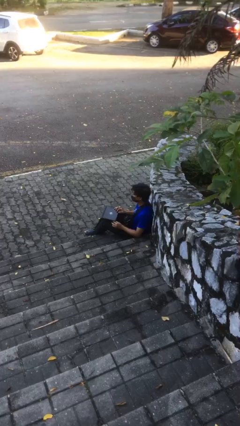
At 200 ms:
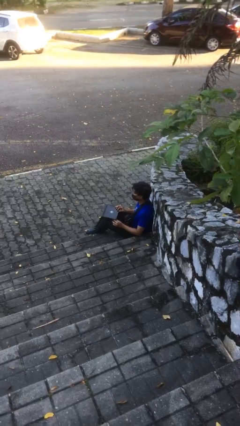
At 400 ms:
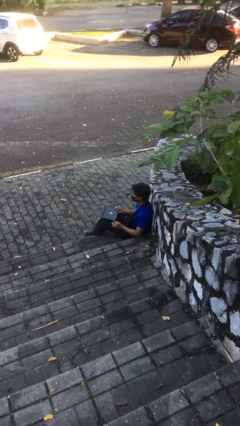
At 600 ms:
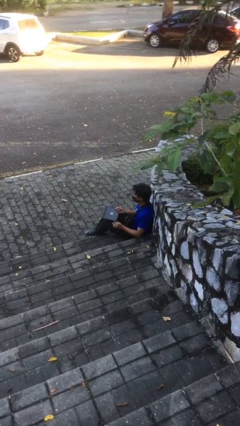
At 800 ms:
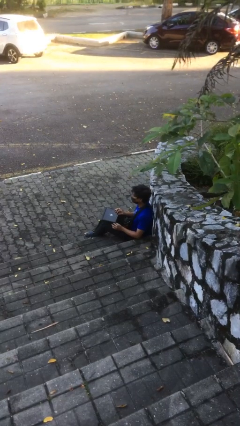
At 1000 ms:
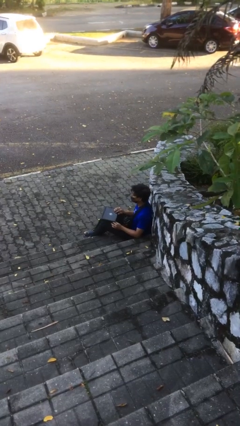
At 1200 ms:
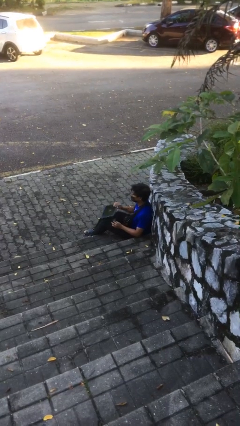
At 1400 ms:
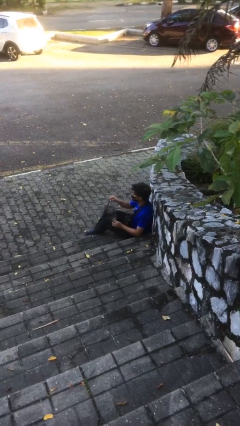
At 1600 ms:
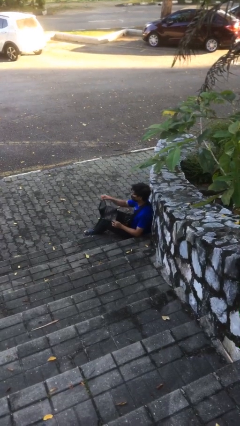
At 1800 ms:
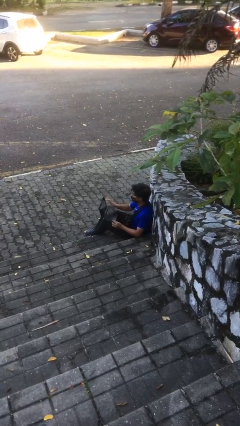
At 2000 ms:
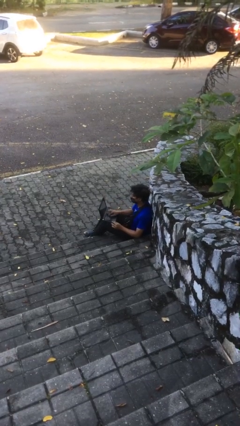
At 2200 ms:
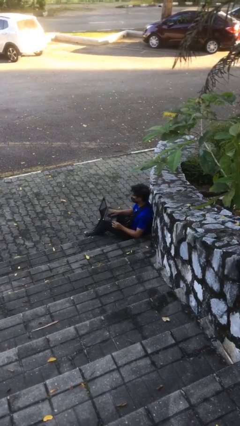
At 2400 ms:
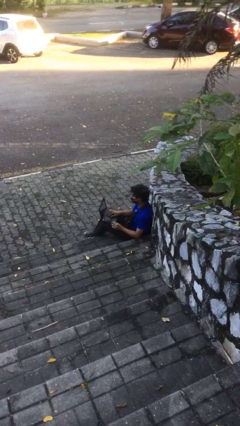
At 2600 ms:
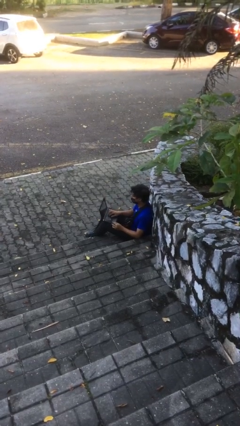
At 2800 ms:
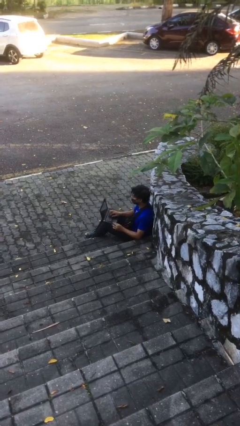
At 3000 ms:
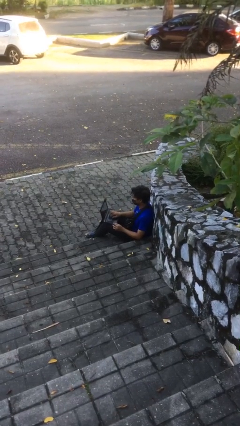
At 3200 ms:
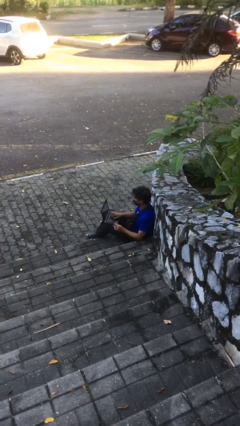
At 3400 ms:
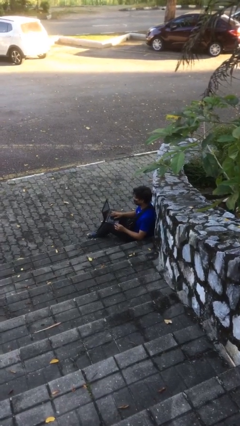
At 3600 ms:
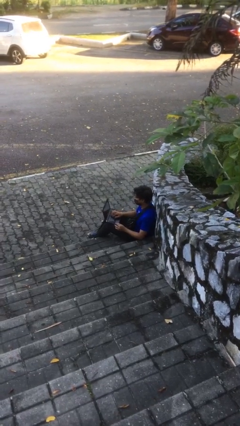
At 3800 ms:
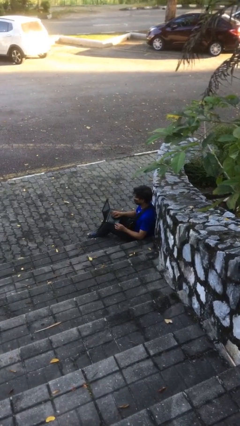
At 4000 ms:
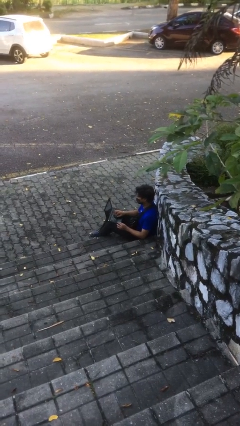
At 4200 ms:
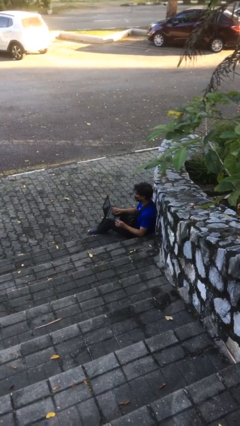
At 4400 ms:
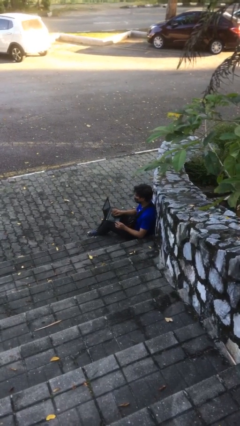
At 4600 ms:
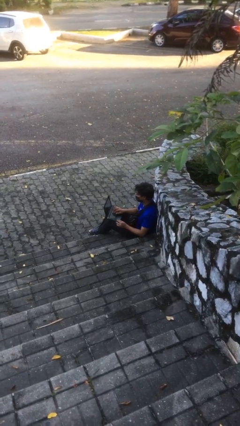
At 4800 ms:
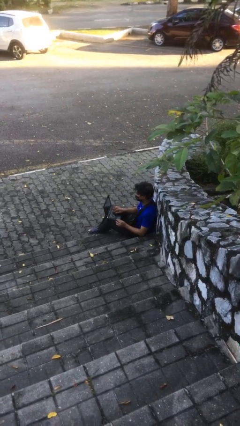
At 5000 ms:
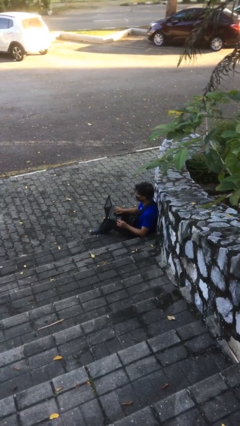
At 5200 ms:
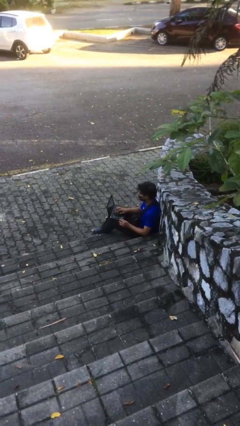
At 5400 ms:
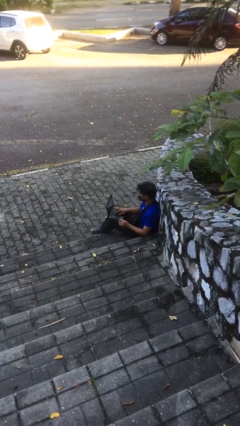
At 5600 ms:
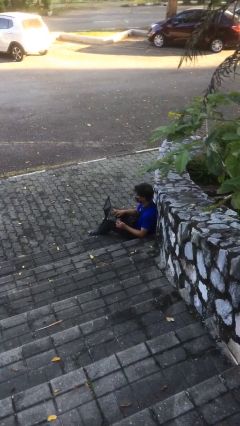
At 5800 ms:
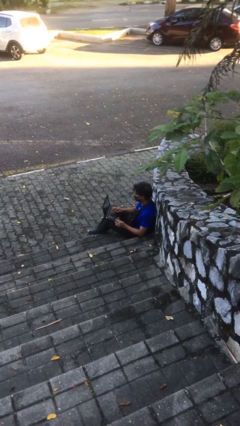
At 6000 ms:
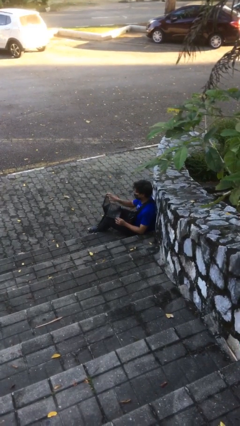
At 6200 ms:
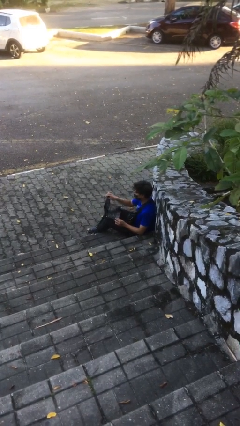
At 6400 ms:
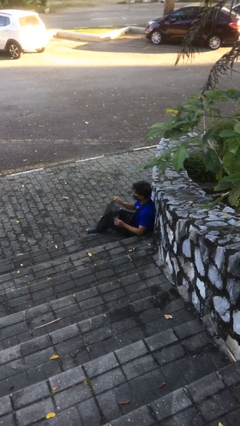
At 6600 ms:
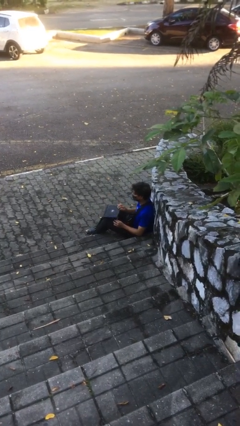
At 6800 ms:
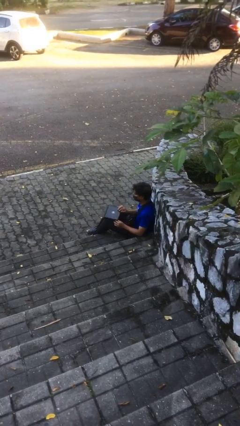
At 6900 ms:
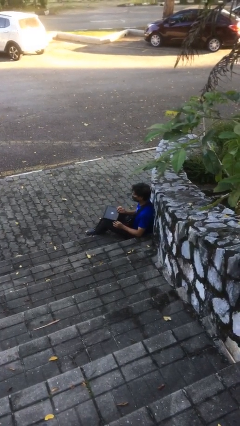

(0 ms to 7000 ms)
person interacts with laptop

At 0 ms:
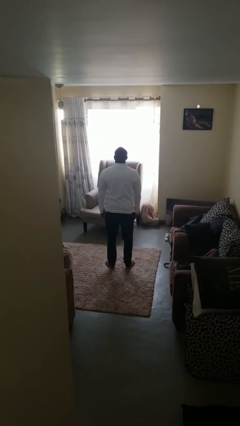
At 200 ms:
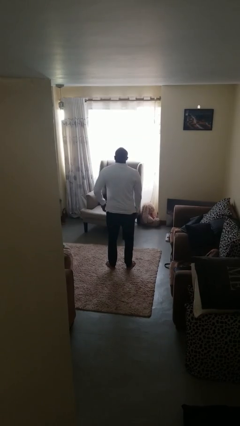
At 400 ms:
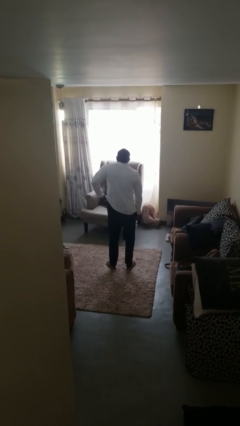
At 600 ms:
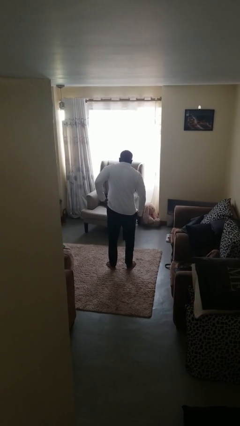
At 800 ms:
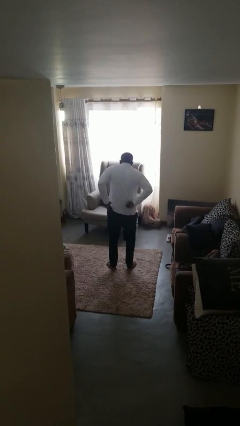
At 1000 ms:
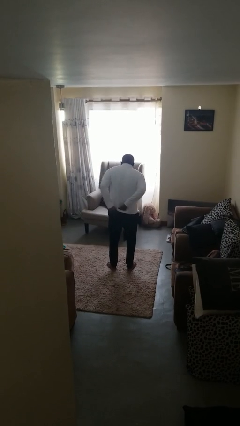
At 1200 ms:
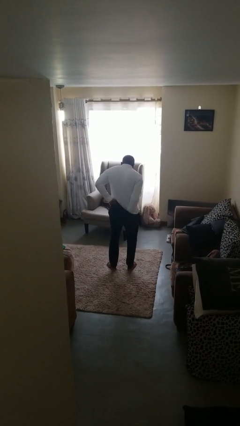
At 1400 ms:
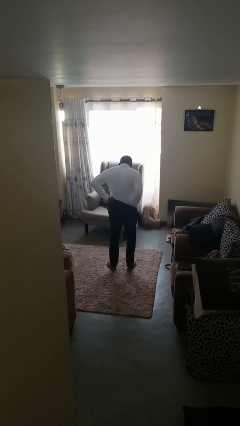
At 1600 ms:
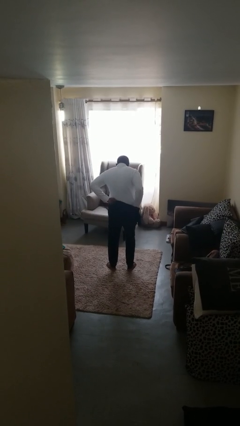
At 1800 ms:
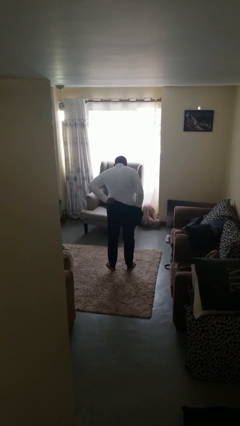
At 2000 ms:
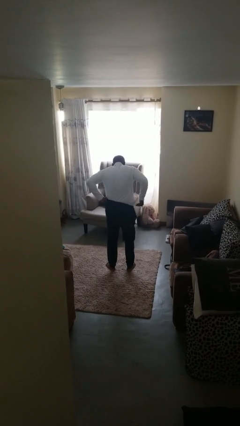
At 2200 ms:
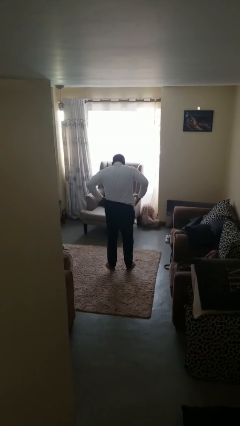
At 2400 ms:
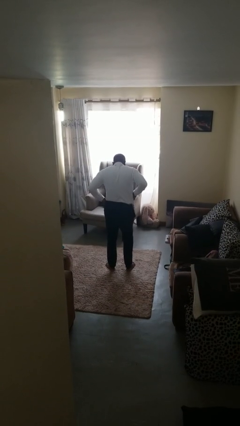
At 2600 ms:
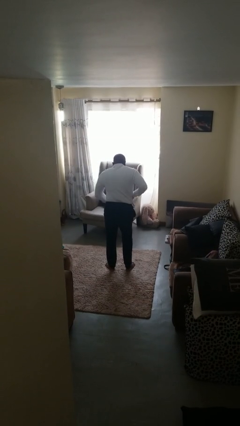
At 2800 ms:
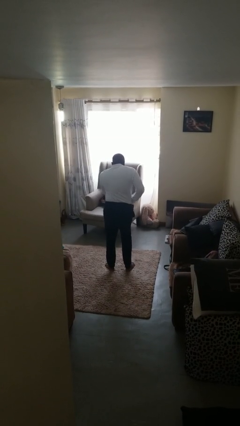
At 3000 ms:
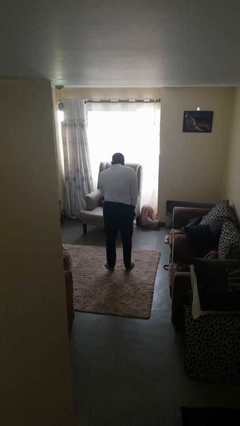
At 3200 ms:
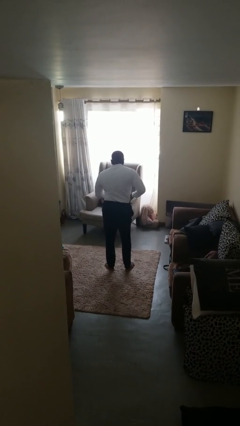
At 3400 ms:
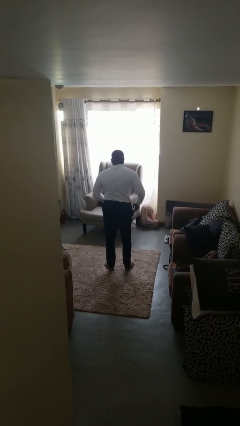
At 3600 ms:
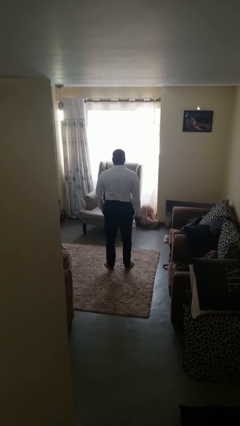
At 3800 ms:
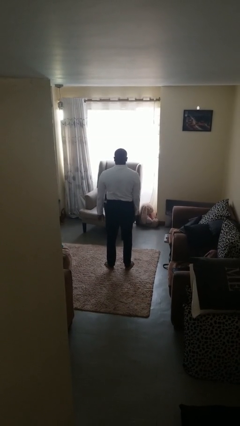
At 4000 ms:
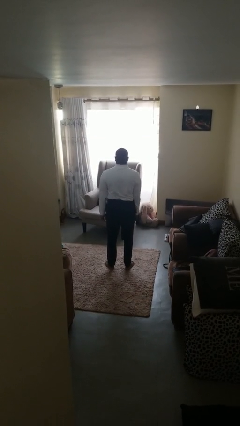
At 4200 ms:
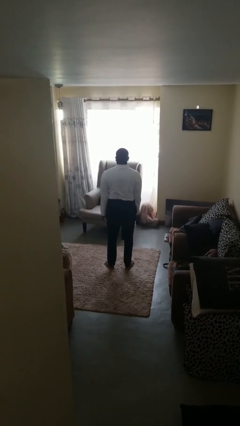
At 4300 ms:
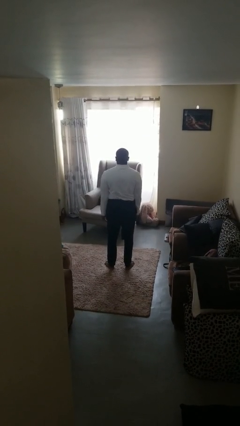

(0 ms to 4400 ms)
person tucks in shirt

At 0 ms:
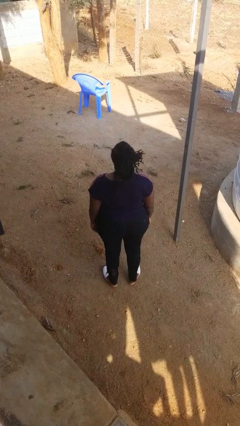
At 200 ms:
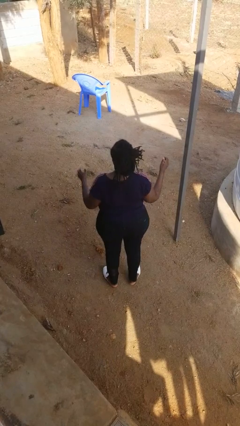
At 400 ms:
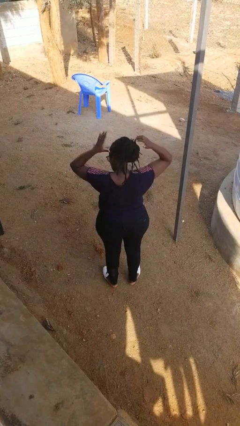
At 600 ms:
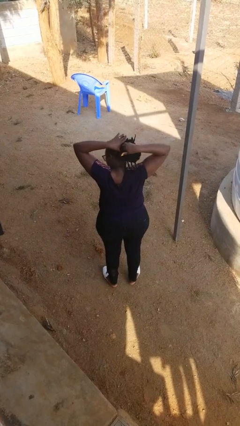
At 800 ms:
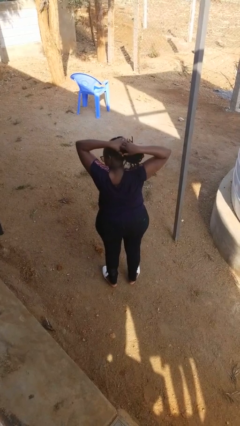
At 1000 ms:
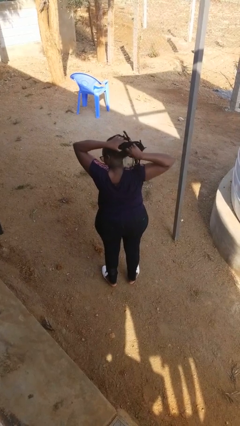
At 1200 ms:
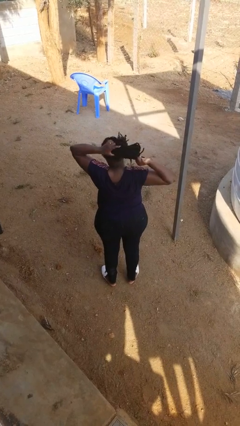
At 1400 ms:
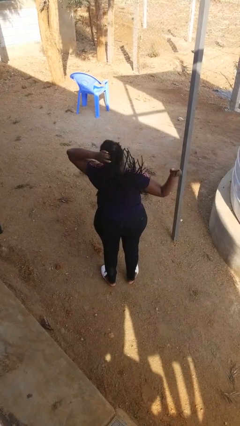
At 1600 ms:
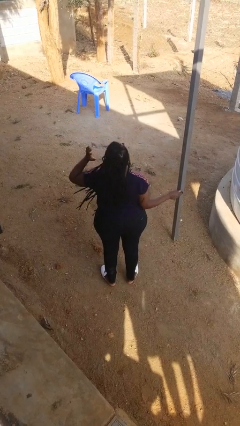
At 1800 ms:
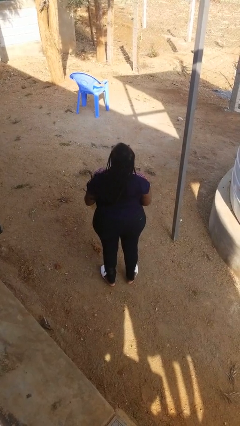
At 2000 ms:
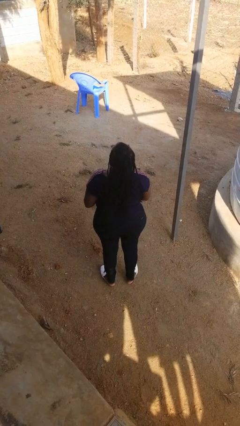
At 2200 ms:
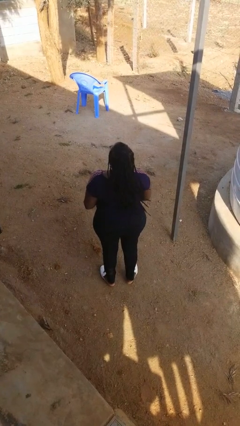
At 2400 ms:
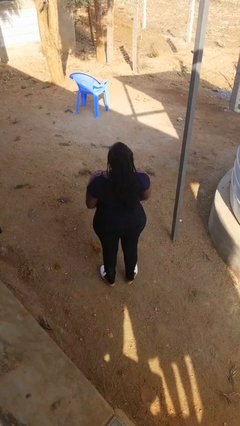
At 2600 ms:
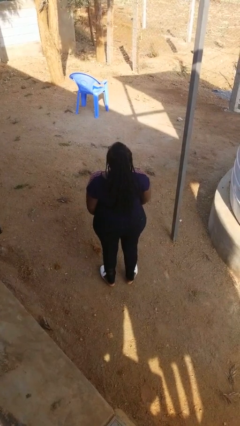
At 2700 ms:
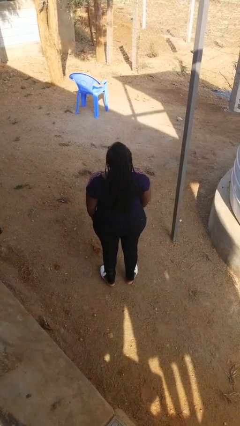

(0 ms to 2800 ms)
person takes off hairtie

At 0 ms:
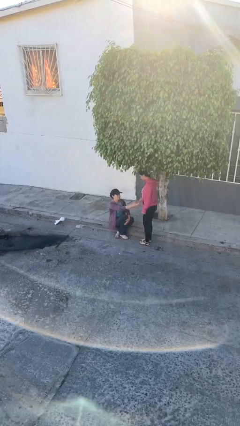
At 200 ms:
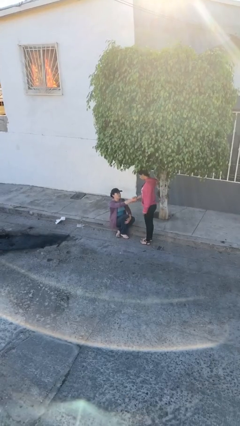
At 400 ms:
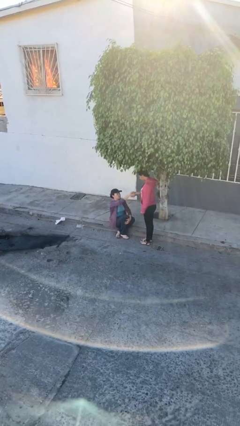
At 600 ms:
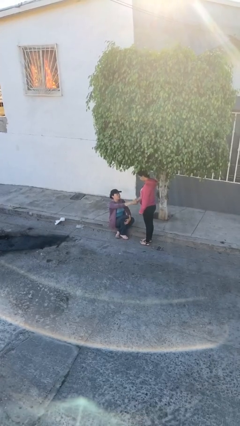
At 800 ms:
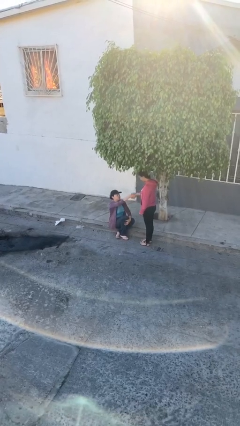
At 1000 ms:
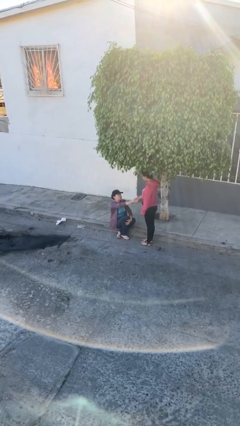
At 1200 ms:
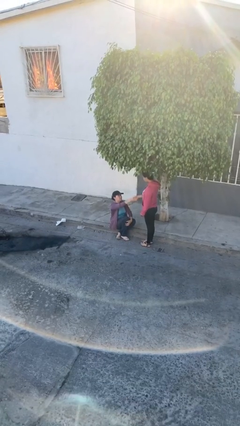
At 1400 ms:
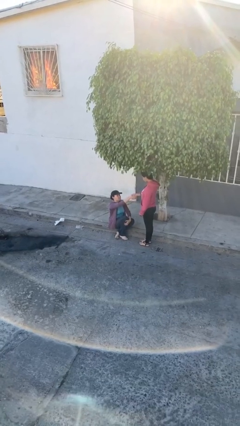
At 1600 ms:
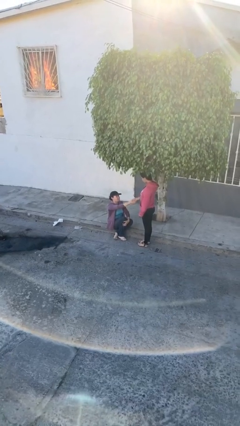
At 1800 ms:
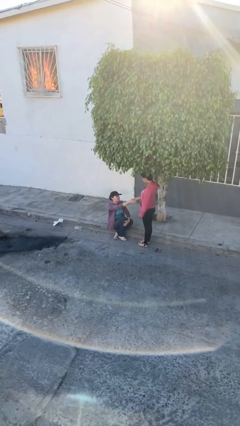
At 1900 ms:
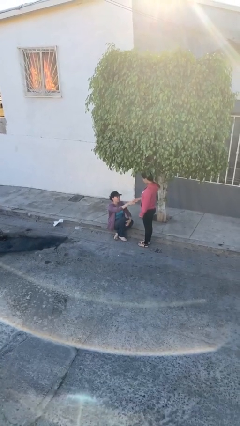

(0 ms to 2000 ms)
person shakes hand

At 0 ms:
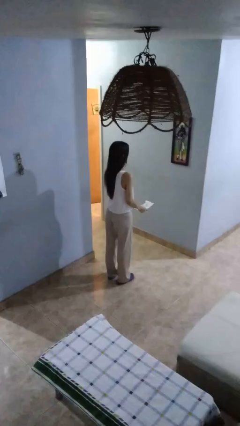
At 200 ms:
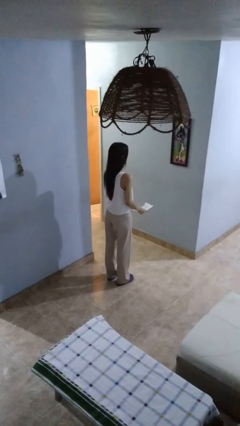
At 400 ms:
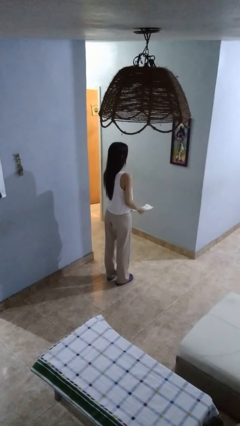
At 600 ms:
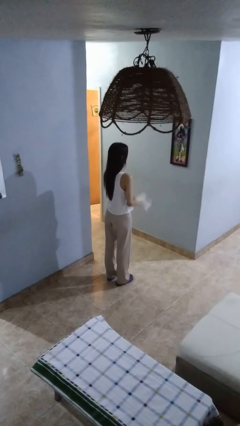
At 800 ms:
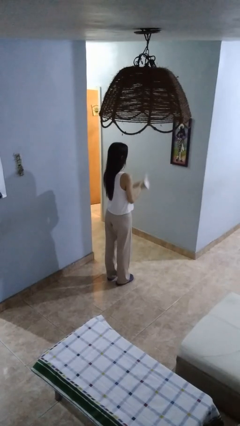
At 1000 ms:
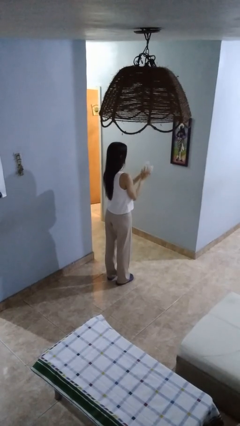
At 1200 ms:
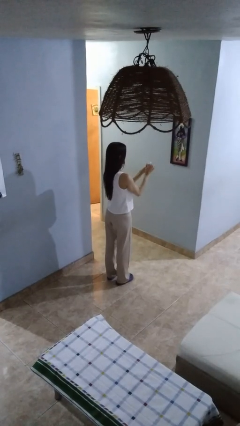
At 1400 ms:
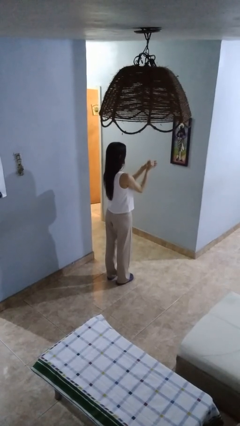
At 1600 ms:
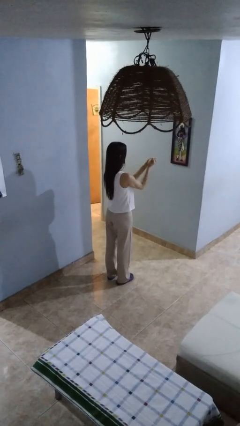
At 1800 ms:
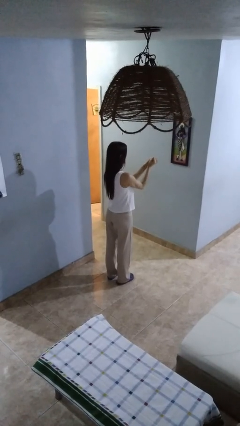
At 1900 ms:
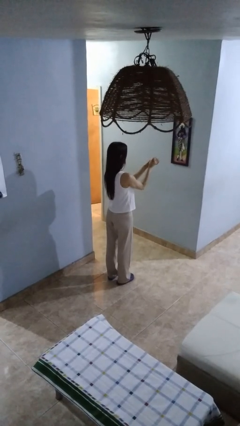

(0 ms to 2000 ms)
person crumples paper
